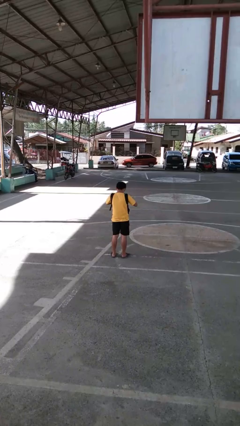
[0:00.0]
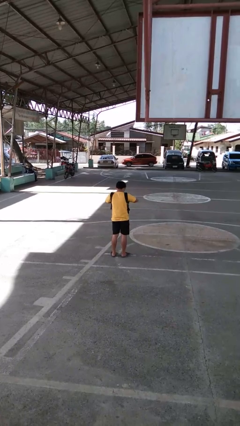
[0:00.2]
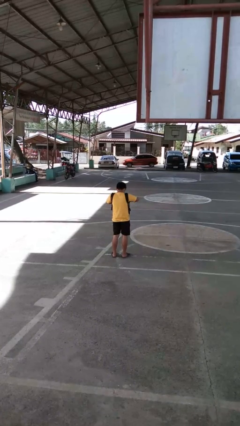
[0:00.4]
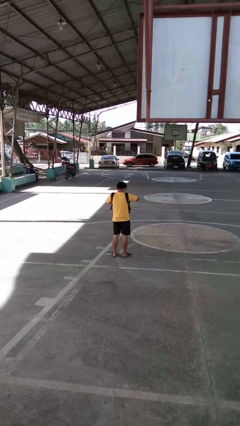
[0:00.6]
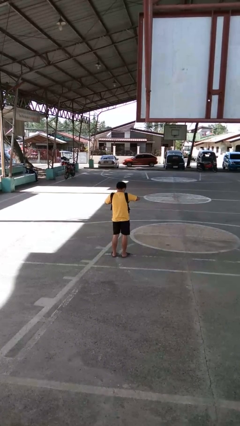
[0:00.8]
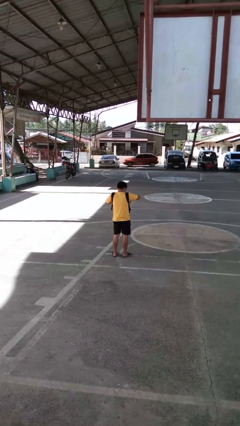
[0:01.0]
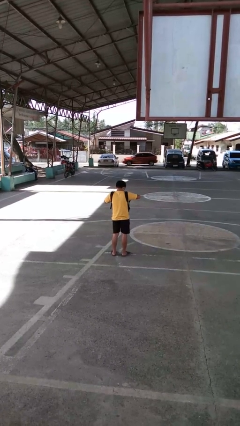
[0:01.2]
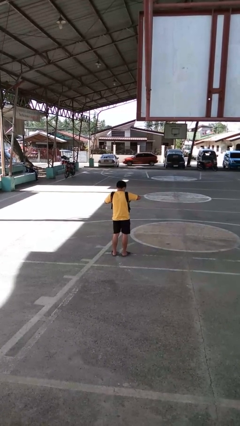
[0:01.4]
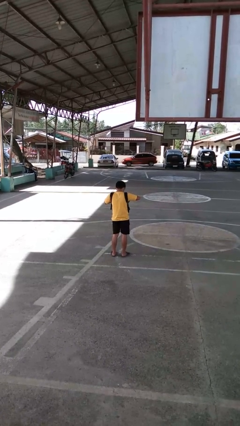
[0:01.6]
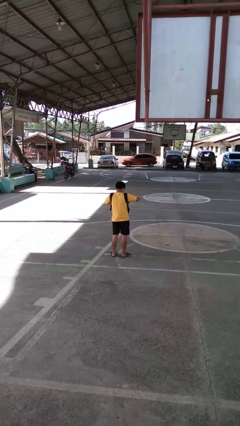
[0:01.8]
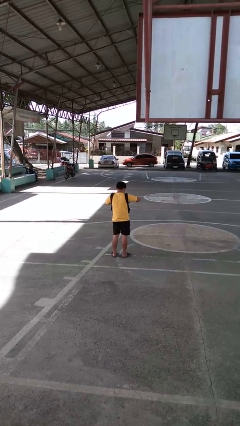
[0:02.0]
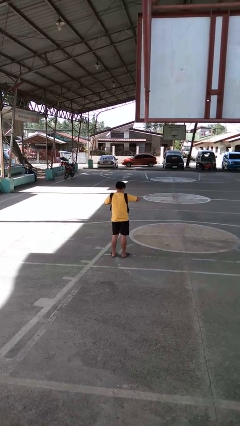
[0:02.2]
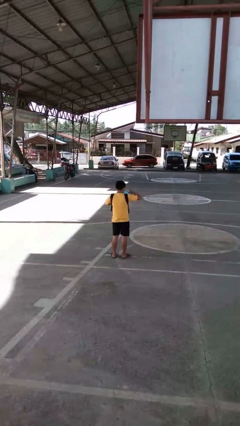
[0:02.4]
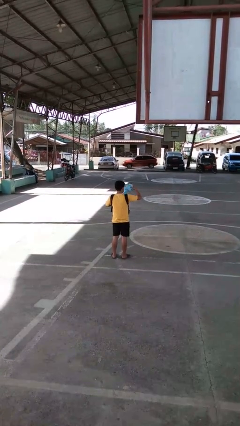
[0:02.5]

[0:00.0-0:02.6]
person searches in backpack

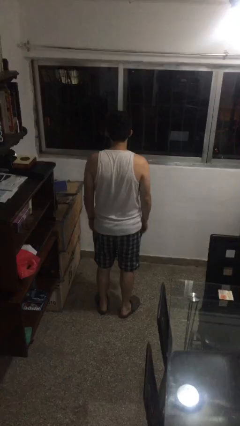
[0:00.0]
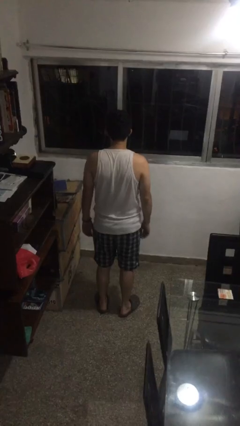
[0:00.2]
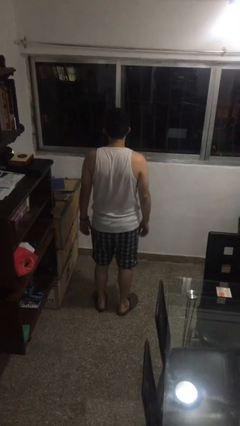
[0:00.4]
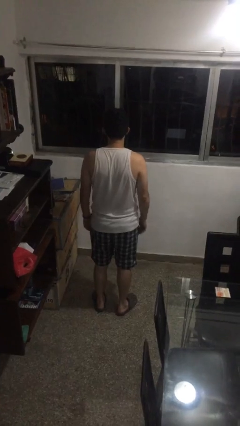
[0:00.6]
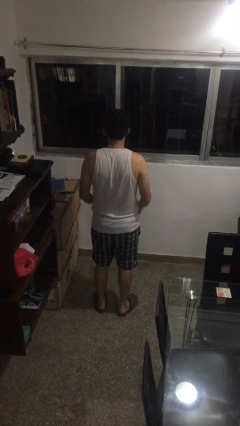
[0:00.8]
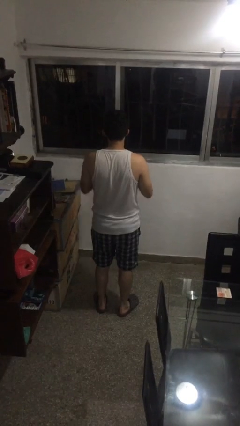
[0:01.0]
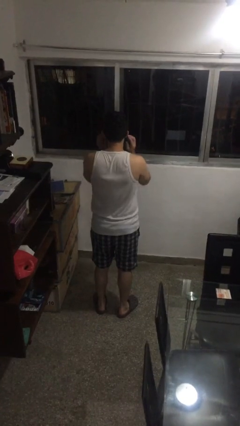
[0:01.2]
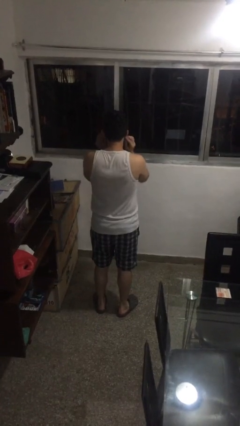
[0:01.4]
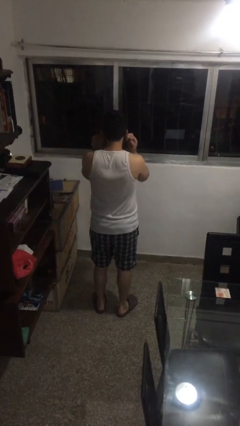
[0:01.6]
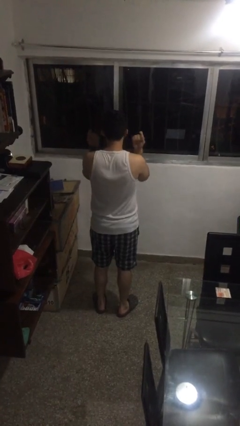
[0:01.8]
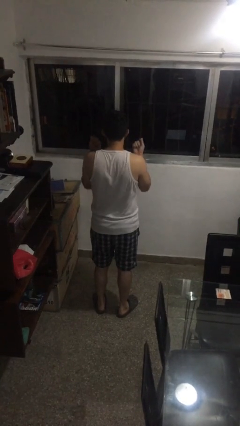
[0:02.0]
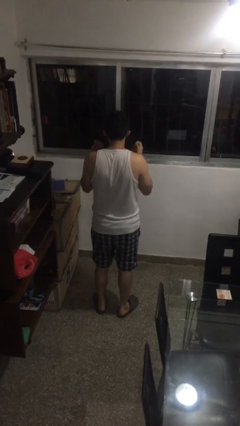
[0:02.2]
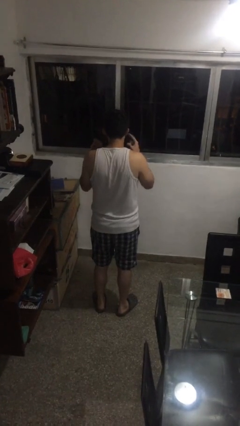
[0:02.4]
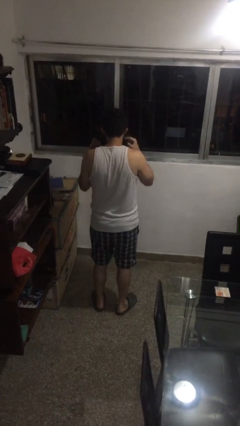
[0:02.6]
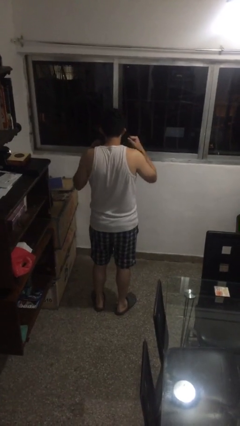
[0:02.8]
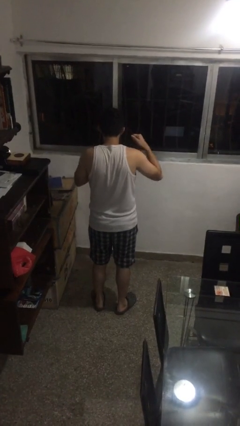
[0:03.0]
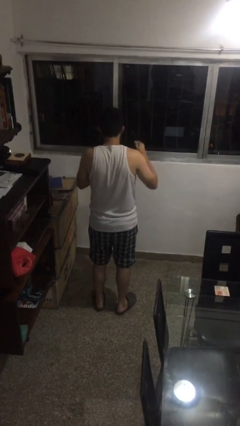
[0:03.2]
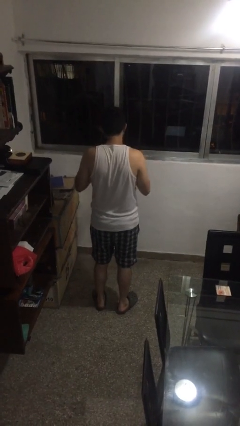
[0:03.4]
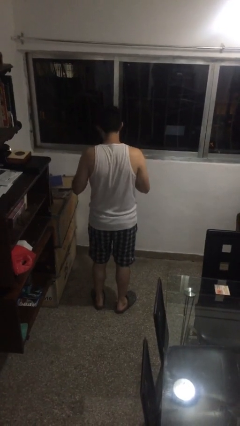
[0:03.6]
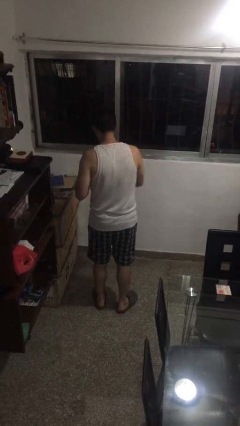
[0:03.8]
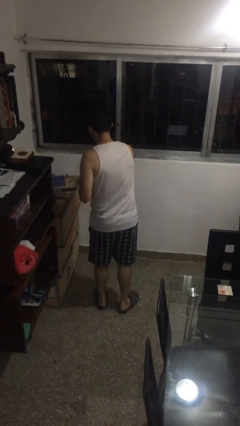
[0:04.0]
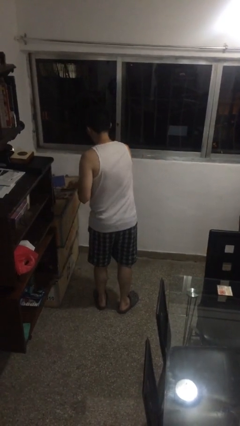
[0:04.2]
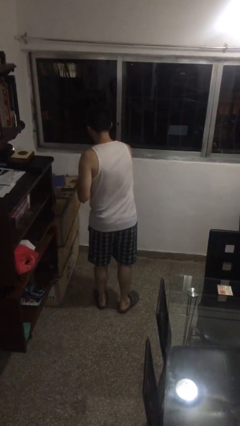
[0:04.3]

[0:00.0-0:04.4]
person takes off facemask

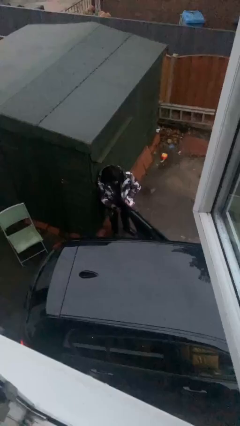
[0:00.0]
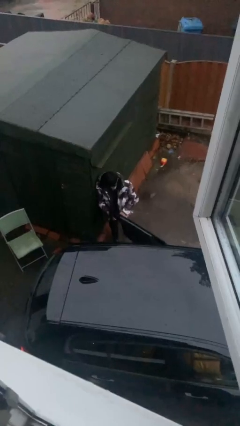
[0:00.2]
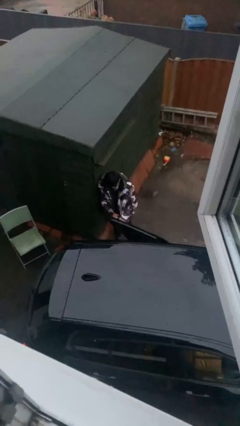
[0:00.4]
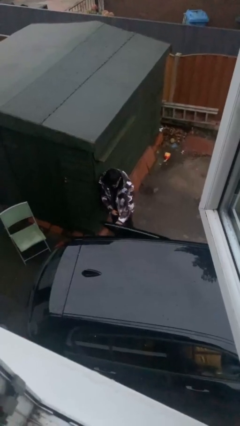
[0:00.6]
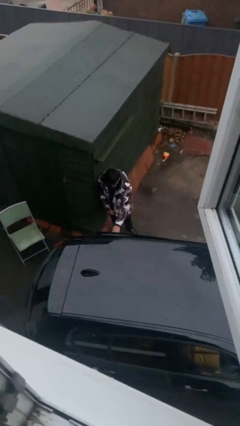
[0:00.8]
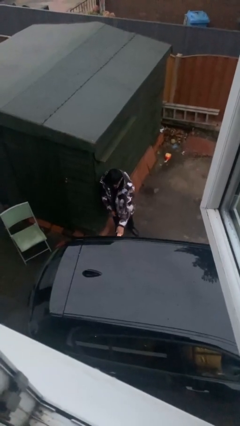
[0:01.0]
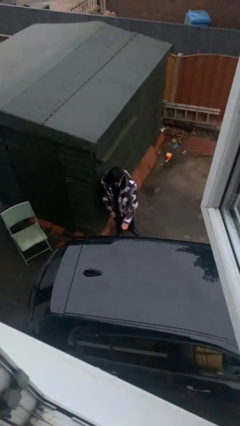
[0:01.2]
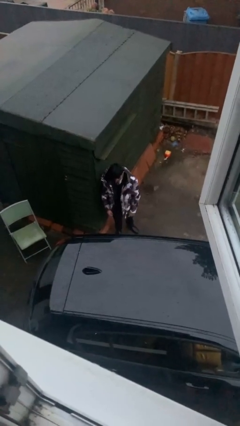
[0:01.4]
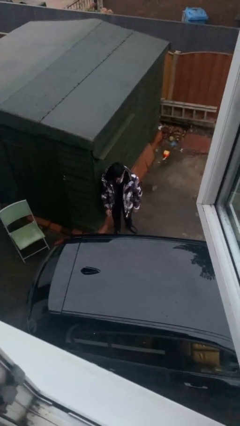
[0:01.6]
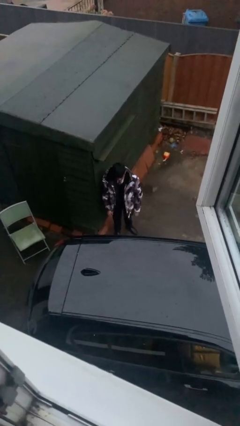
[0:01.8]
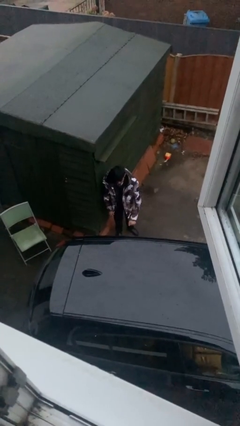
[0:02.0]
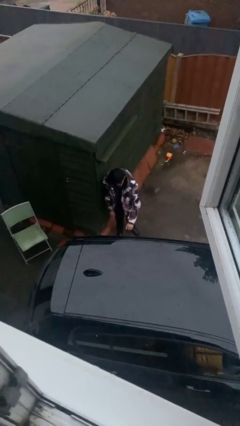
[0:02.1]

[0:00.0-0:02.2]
person closes car door

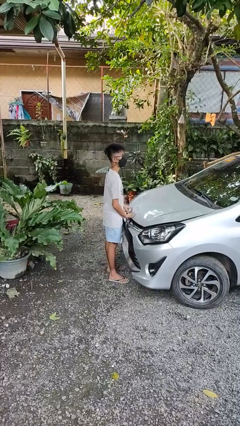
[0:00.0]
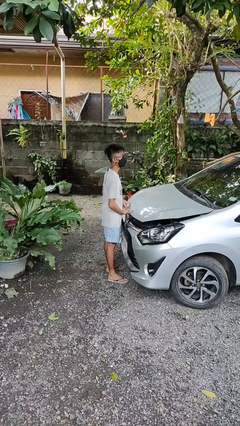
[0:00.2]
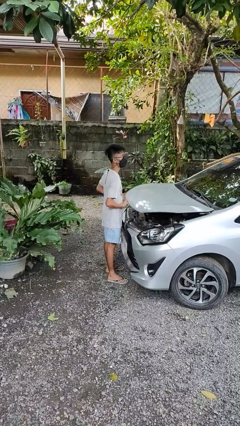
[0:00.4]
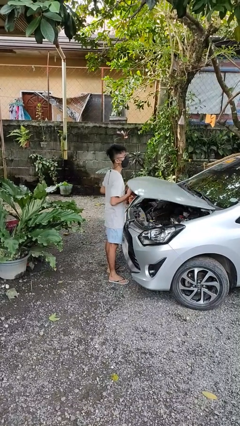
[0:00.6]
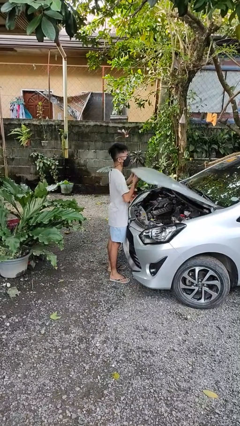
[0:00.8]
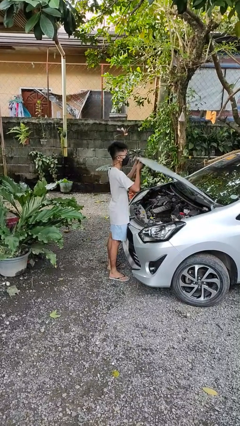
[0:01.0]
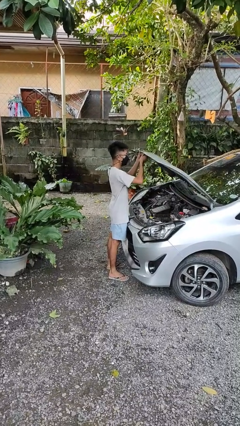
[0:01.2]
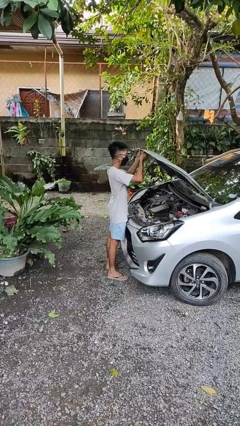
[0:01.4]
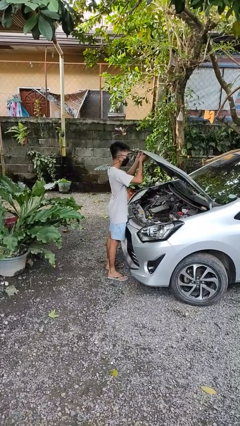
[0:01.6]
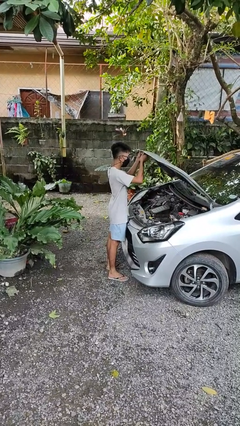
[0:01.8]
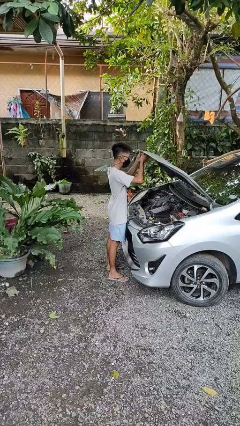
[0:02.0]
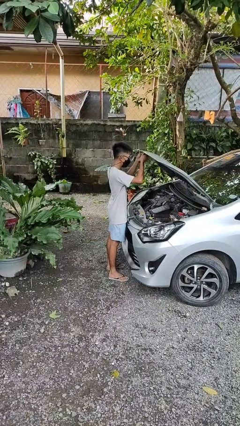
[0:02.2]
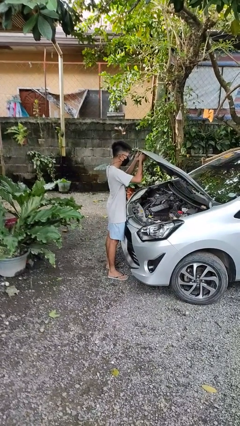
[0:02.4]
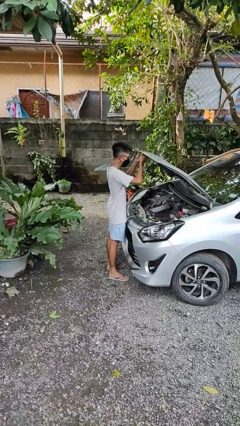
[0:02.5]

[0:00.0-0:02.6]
person opens car hood

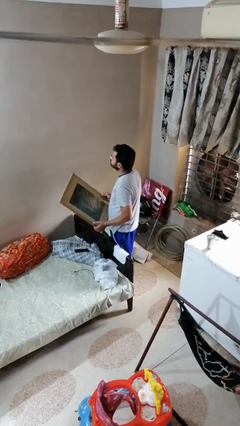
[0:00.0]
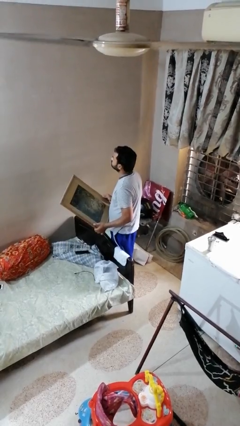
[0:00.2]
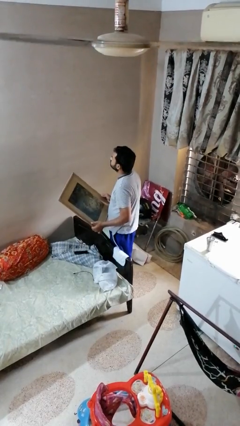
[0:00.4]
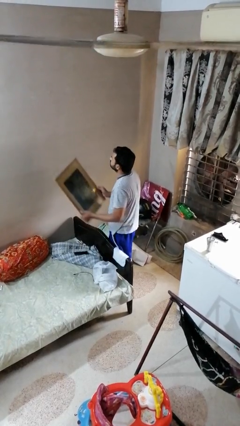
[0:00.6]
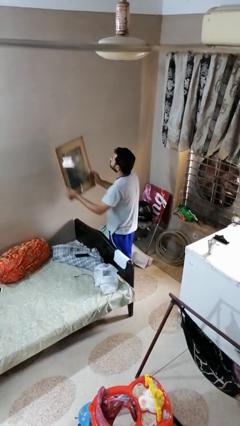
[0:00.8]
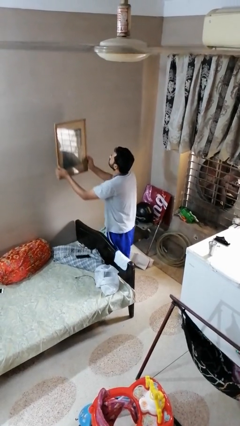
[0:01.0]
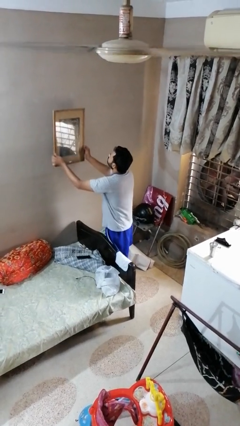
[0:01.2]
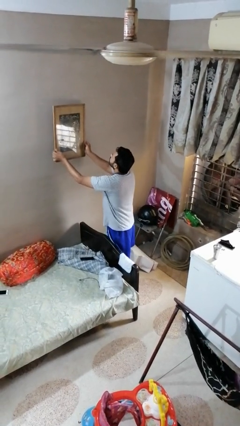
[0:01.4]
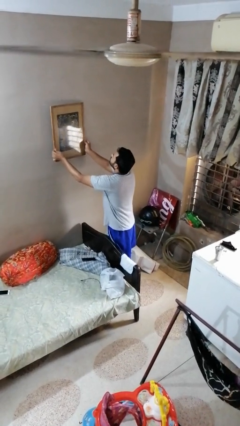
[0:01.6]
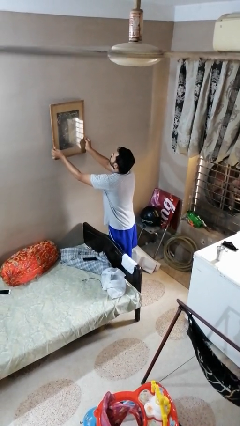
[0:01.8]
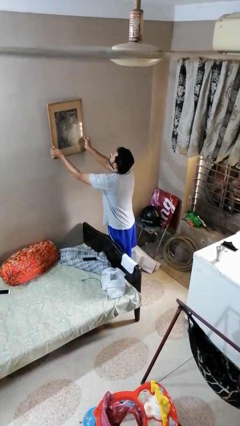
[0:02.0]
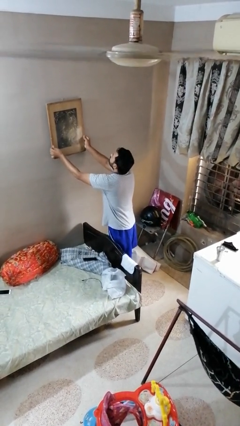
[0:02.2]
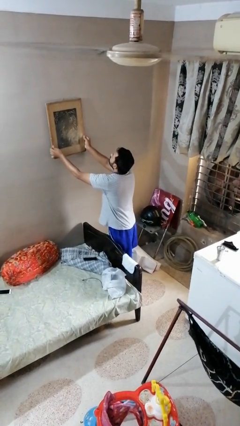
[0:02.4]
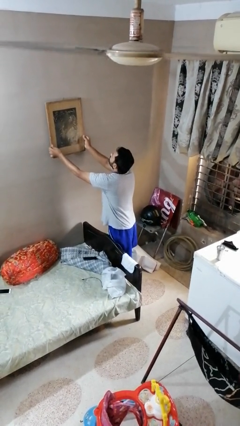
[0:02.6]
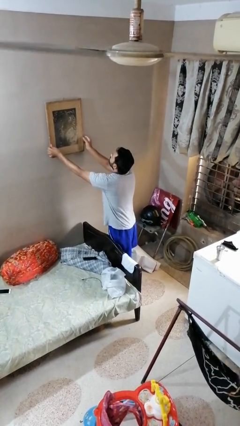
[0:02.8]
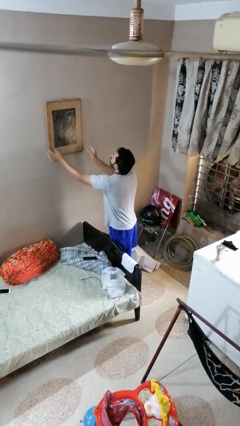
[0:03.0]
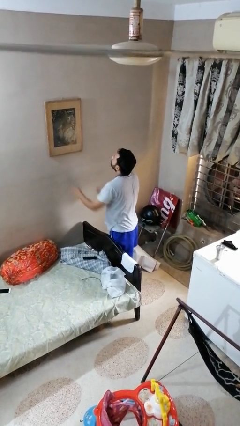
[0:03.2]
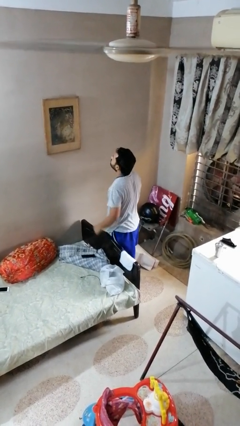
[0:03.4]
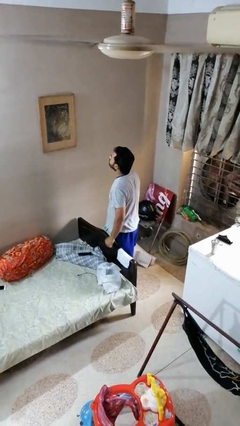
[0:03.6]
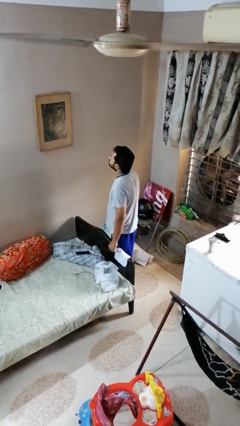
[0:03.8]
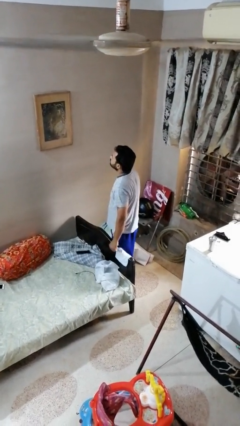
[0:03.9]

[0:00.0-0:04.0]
person puts up picture frame

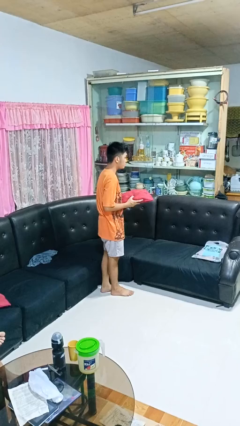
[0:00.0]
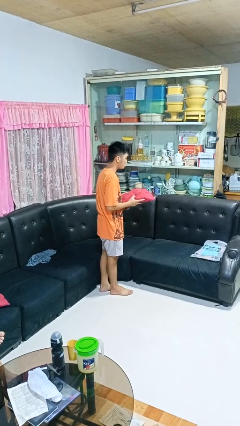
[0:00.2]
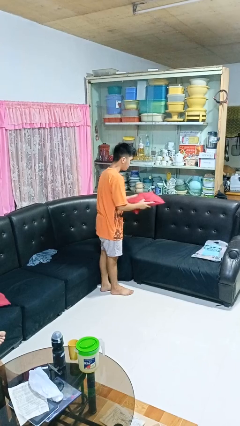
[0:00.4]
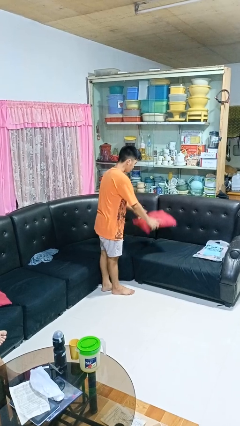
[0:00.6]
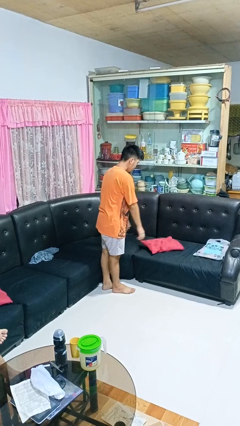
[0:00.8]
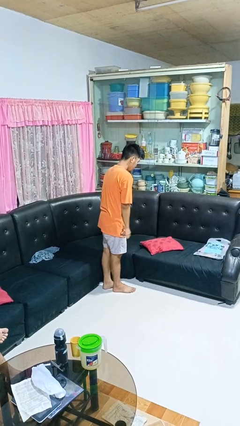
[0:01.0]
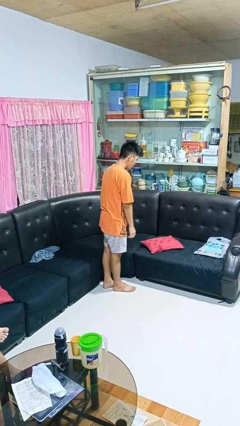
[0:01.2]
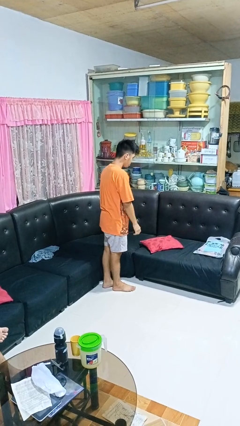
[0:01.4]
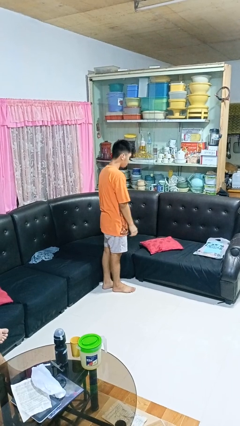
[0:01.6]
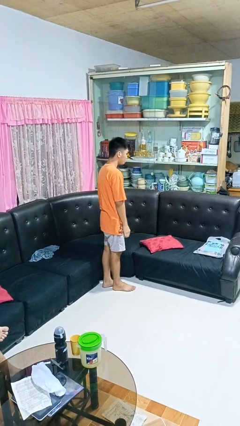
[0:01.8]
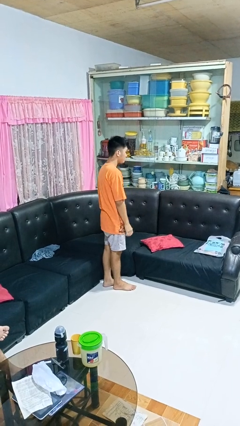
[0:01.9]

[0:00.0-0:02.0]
person puts down object on couch
